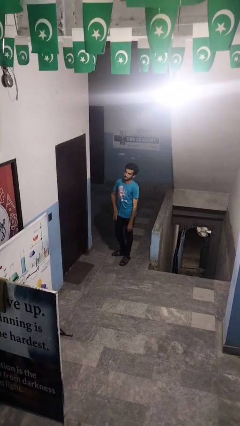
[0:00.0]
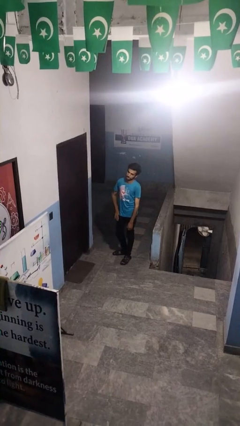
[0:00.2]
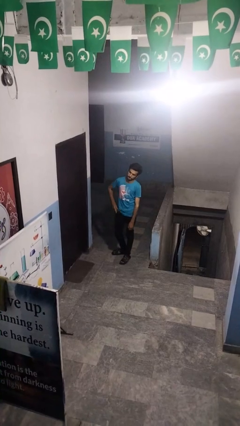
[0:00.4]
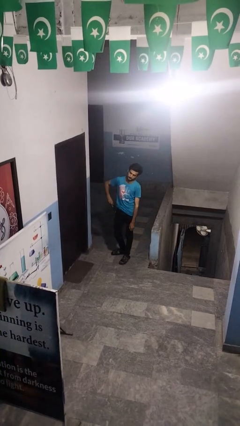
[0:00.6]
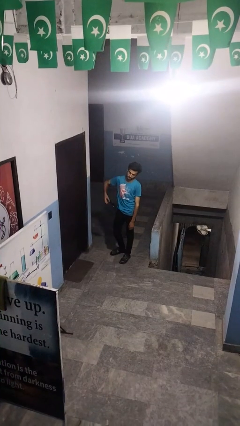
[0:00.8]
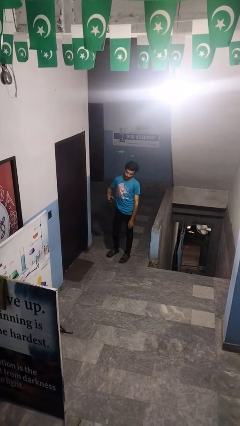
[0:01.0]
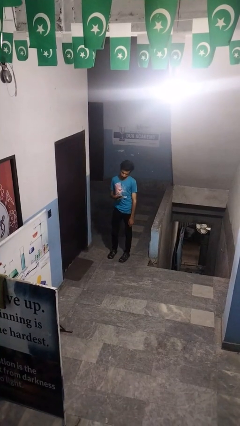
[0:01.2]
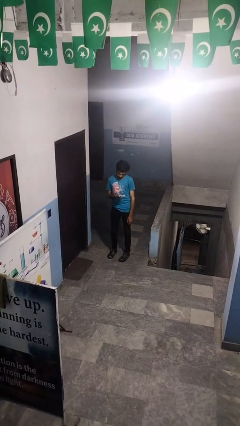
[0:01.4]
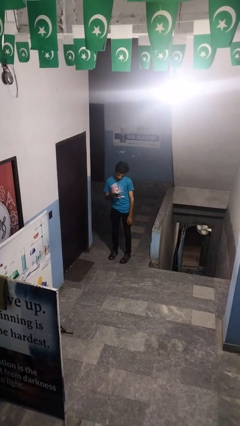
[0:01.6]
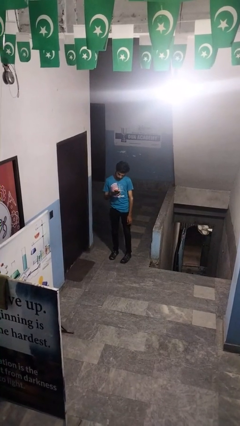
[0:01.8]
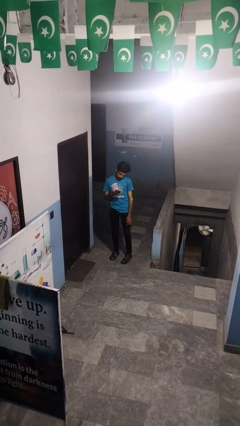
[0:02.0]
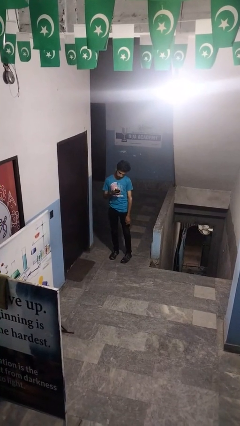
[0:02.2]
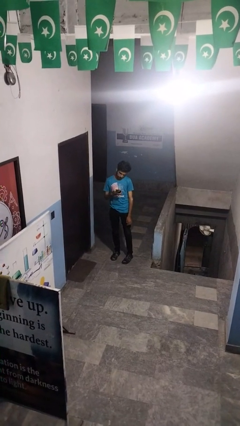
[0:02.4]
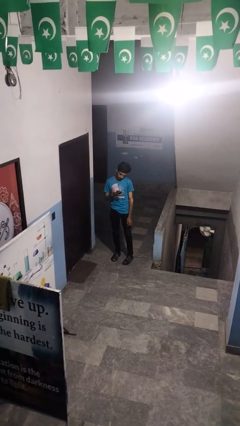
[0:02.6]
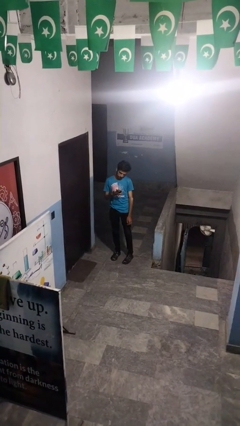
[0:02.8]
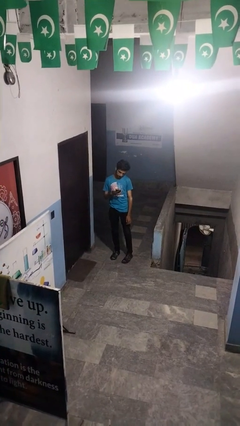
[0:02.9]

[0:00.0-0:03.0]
person takes phone from pocket

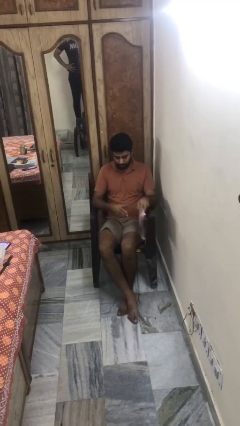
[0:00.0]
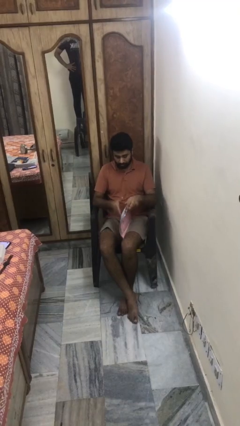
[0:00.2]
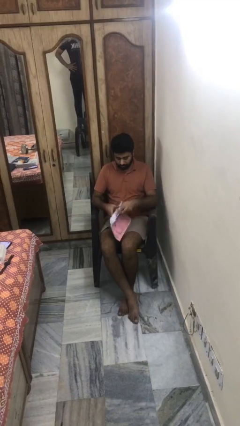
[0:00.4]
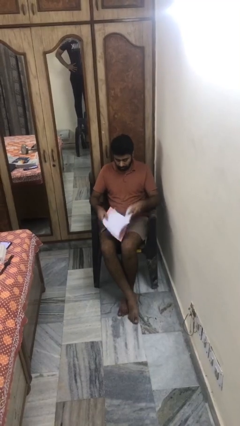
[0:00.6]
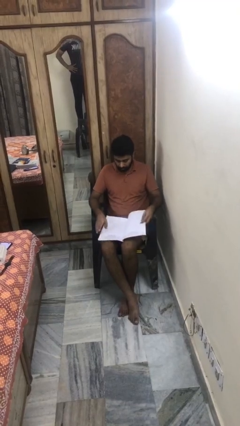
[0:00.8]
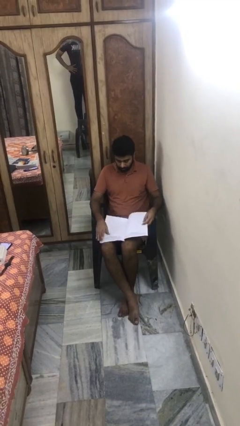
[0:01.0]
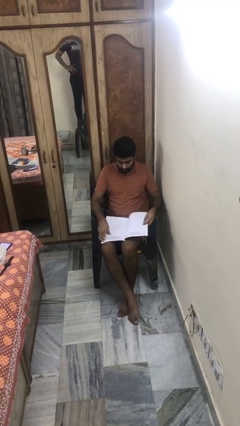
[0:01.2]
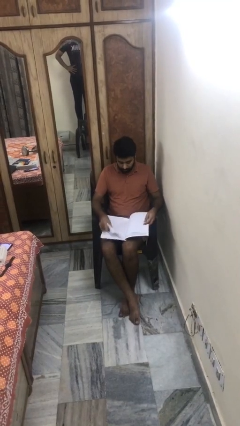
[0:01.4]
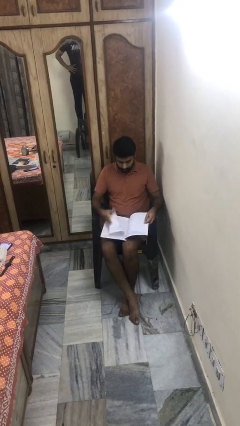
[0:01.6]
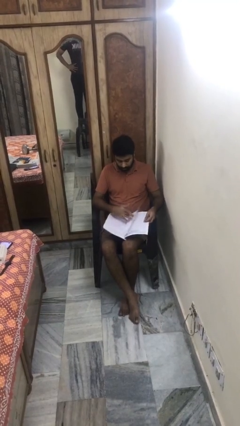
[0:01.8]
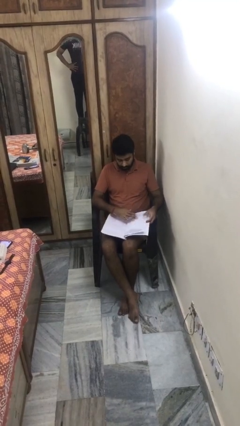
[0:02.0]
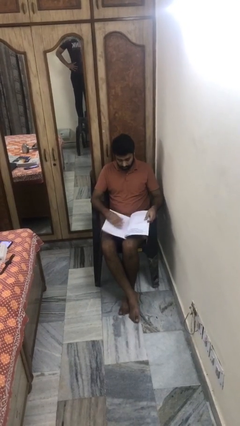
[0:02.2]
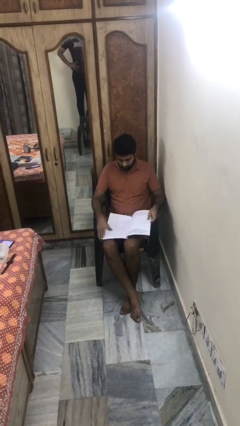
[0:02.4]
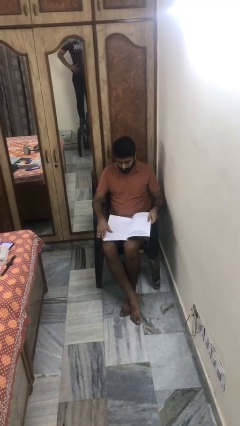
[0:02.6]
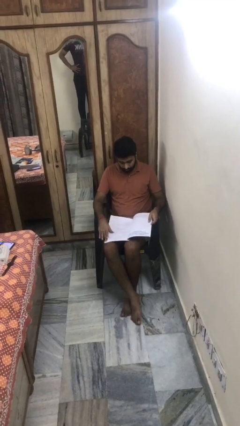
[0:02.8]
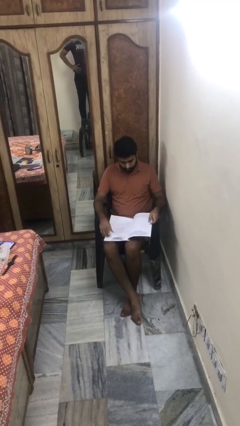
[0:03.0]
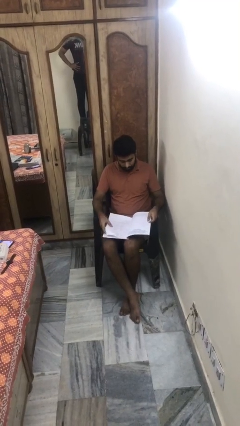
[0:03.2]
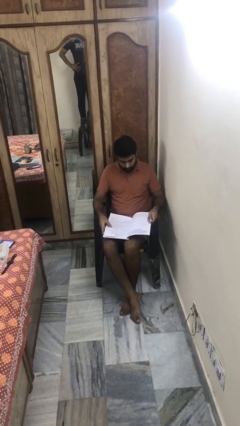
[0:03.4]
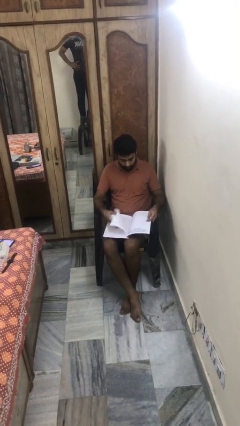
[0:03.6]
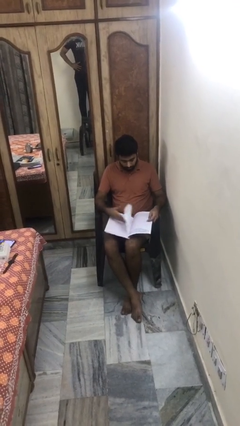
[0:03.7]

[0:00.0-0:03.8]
person reads magazine

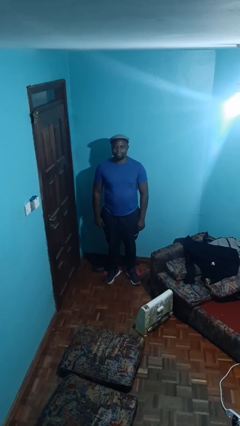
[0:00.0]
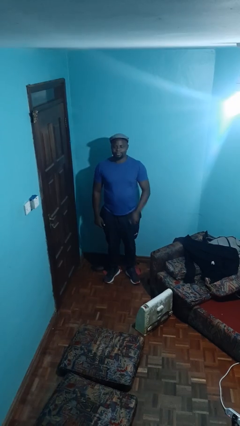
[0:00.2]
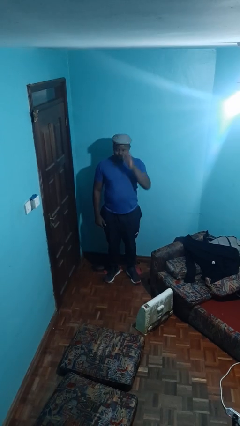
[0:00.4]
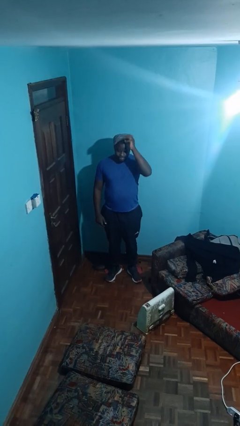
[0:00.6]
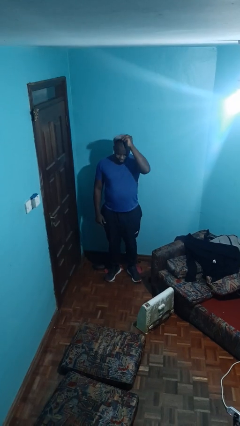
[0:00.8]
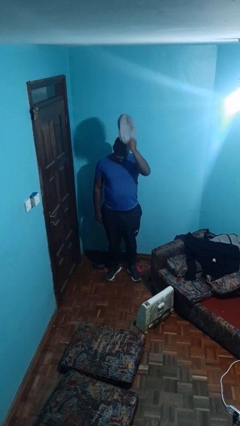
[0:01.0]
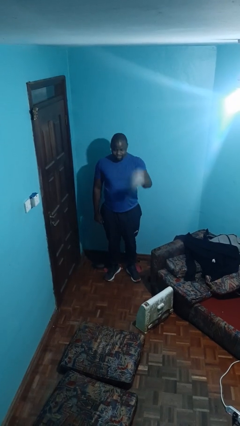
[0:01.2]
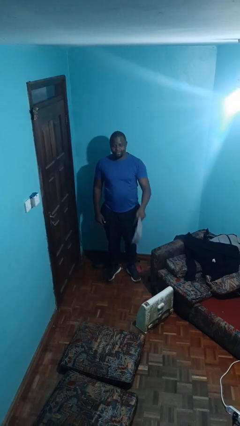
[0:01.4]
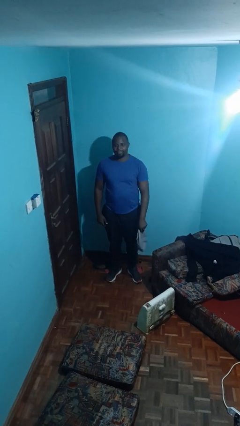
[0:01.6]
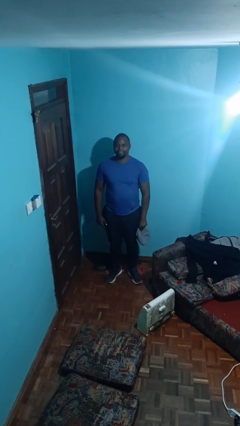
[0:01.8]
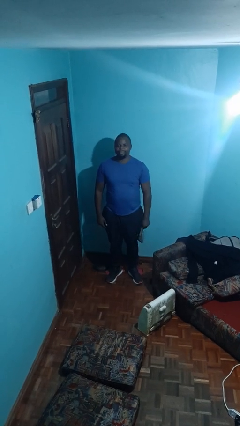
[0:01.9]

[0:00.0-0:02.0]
person takes off hat

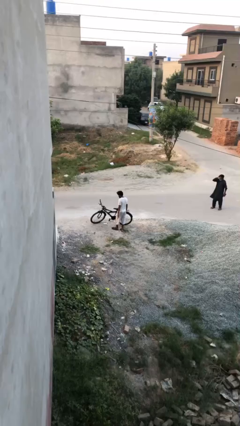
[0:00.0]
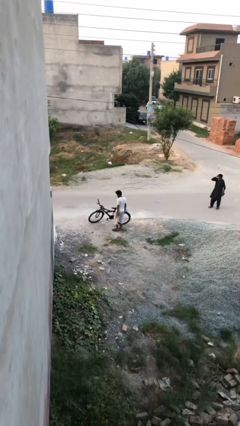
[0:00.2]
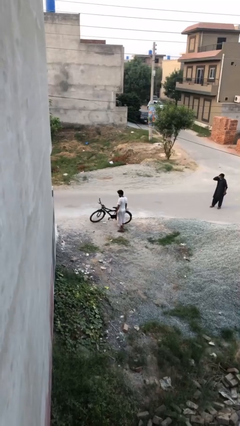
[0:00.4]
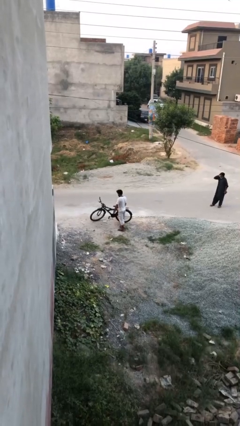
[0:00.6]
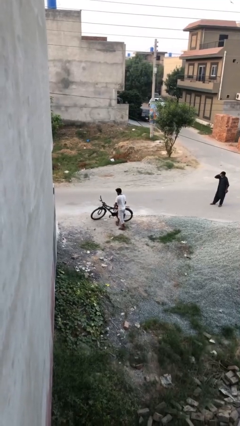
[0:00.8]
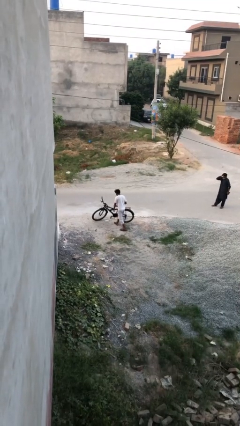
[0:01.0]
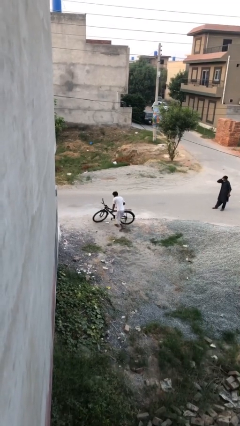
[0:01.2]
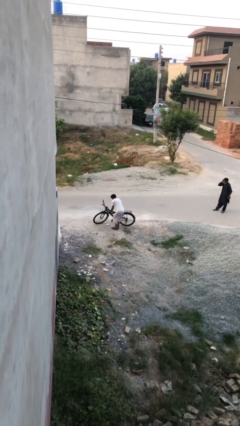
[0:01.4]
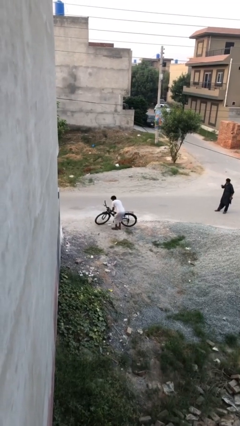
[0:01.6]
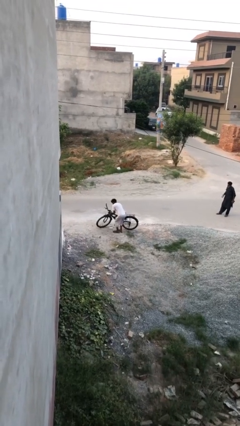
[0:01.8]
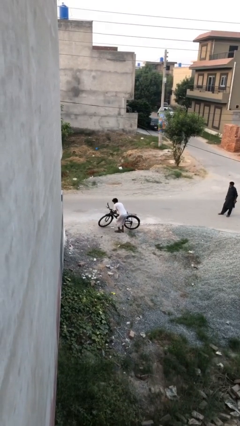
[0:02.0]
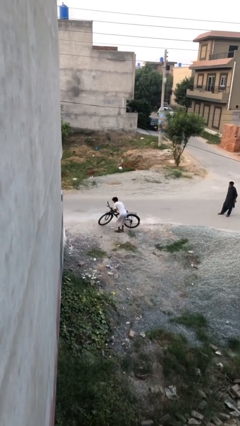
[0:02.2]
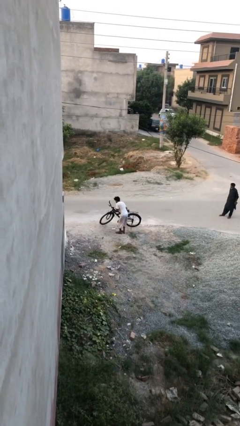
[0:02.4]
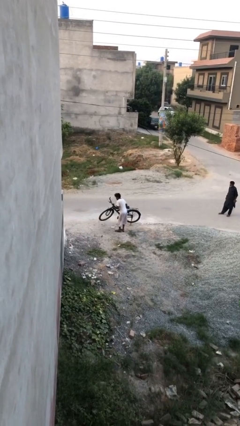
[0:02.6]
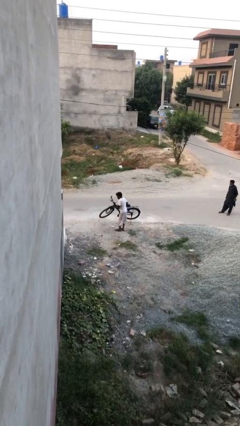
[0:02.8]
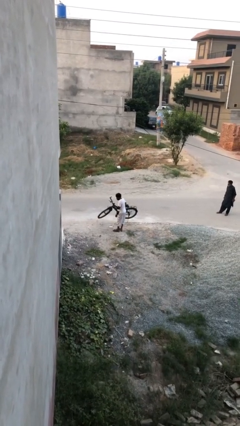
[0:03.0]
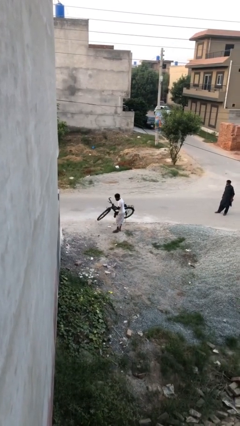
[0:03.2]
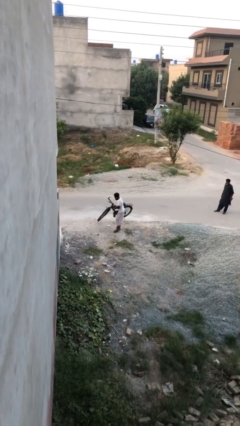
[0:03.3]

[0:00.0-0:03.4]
person picks up object from floor

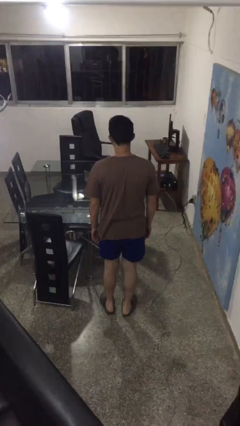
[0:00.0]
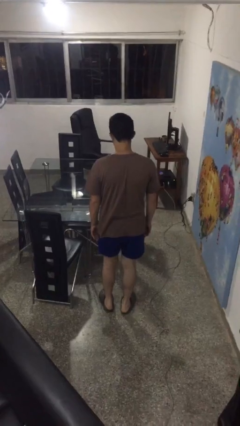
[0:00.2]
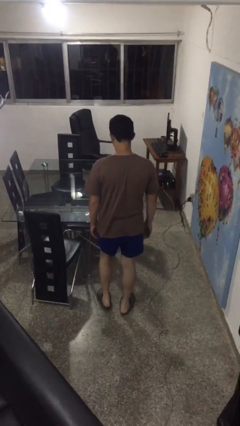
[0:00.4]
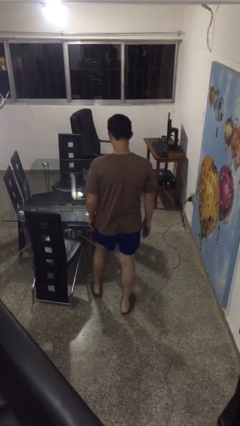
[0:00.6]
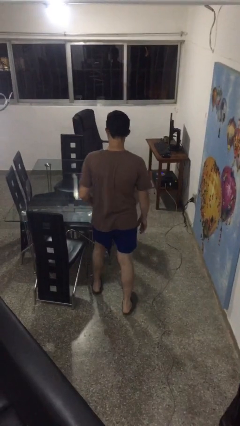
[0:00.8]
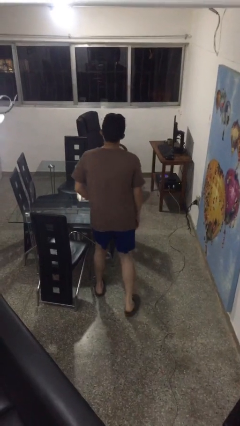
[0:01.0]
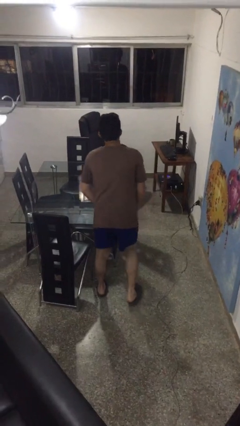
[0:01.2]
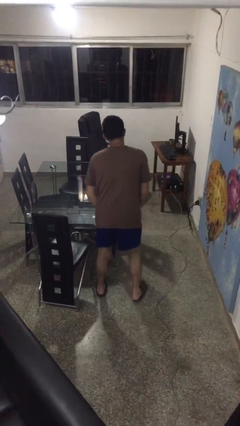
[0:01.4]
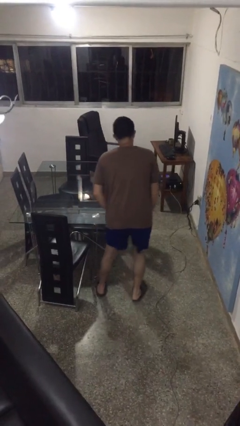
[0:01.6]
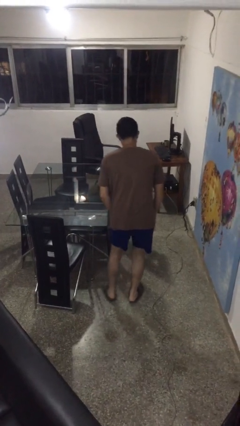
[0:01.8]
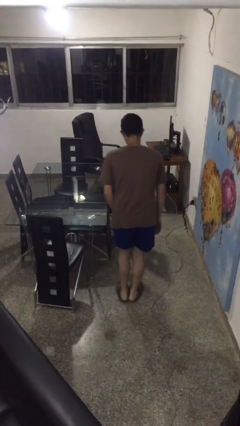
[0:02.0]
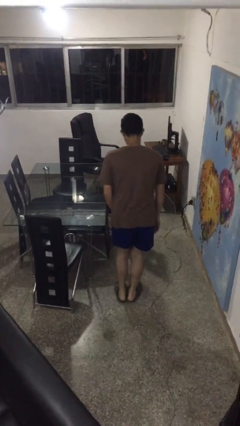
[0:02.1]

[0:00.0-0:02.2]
person bumps into table

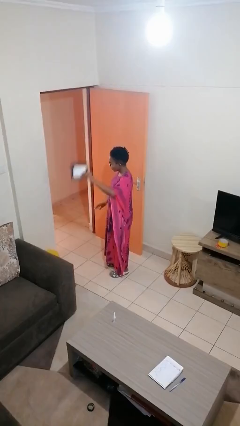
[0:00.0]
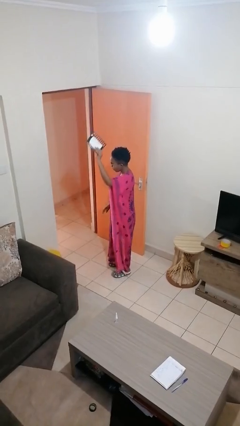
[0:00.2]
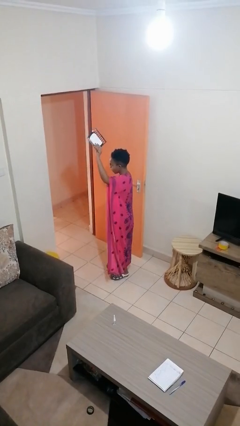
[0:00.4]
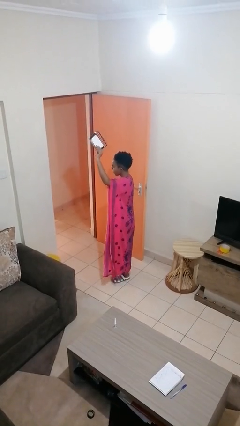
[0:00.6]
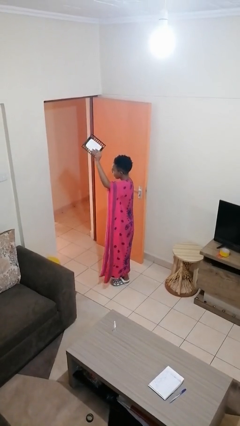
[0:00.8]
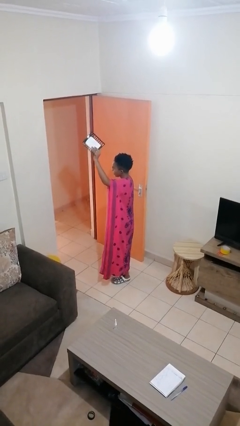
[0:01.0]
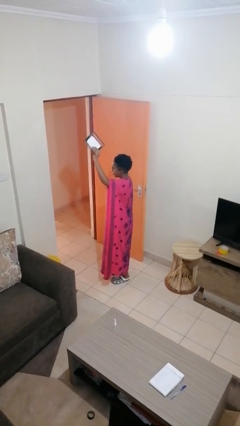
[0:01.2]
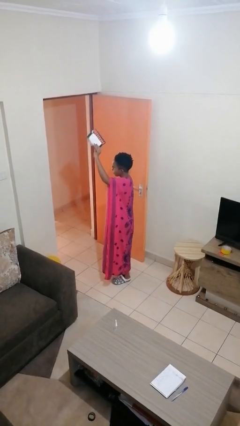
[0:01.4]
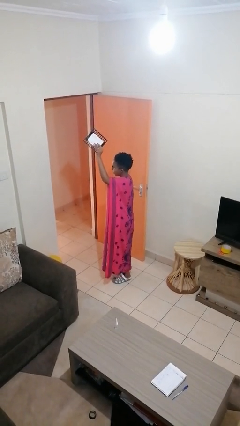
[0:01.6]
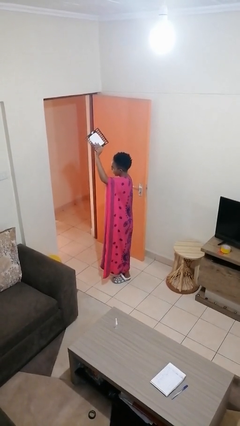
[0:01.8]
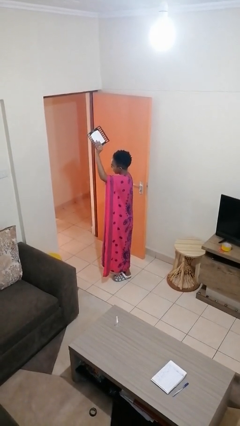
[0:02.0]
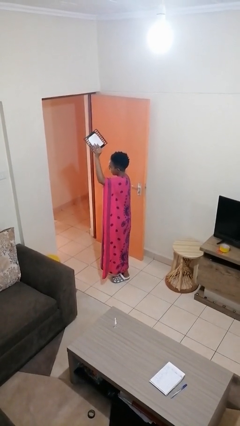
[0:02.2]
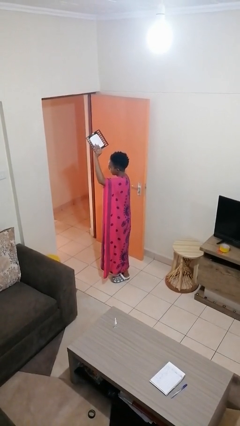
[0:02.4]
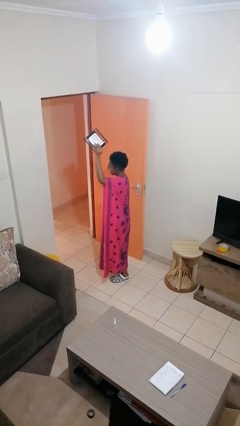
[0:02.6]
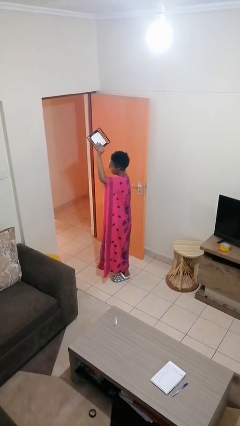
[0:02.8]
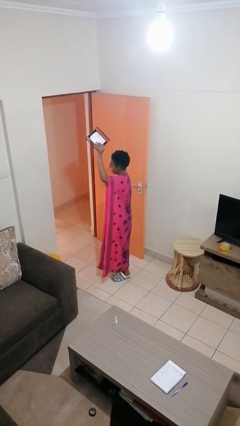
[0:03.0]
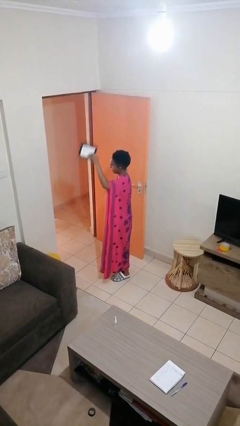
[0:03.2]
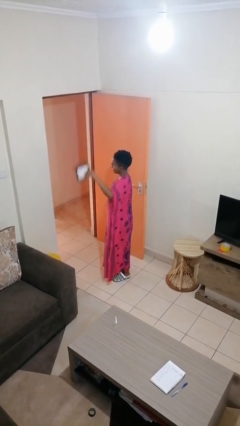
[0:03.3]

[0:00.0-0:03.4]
person holds object above head
